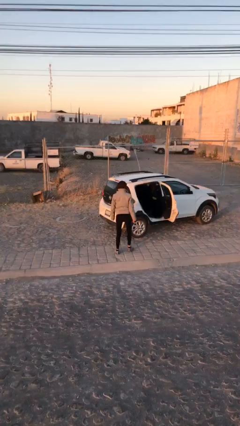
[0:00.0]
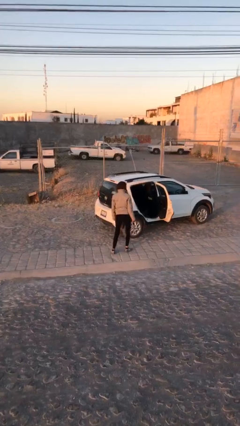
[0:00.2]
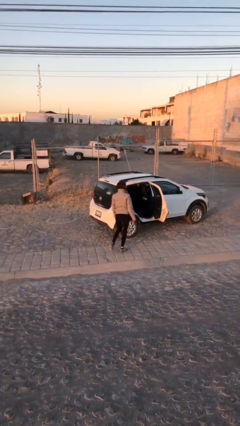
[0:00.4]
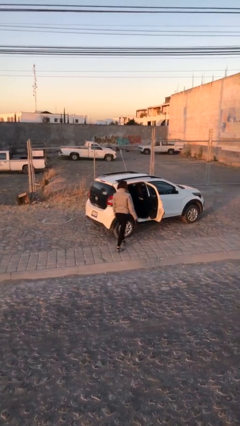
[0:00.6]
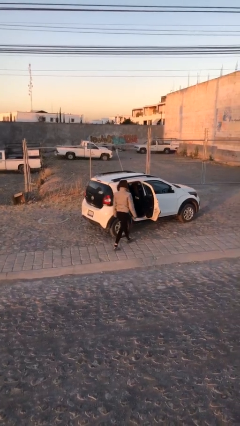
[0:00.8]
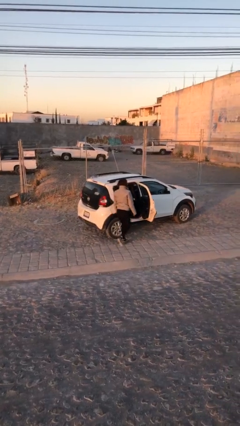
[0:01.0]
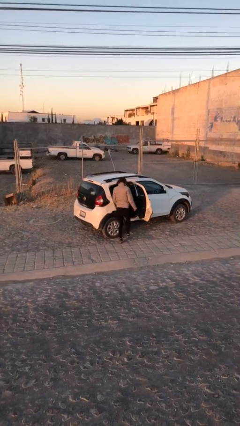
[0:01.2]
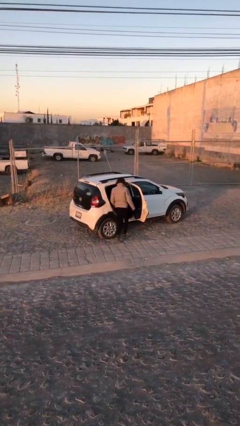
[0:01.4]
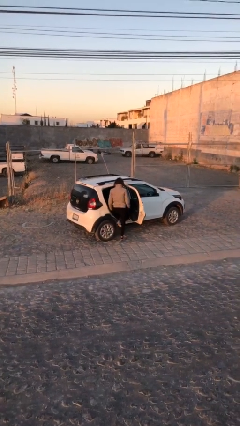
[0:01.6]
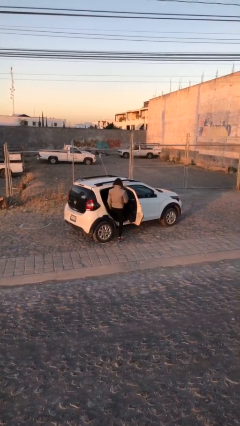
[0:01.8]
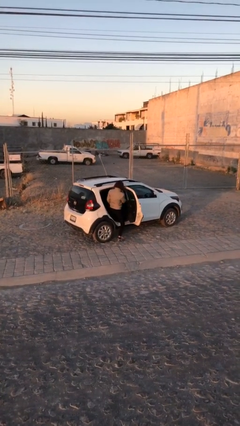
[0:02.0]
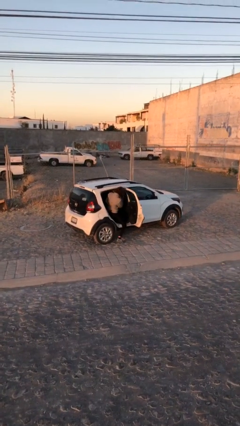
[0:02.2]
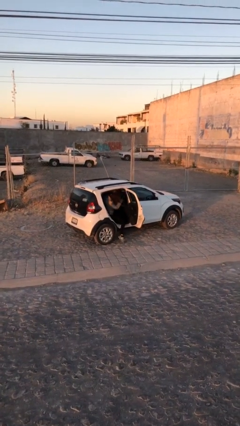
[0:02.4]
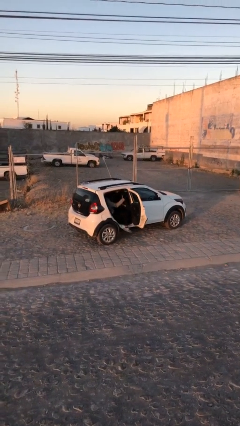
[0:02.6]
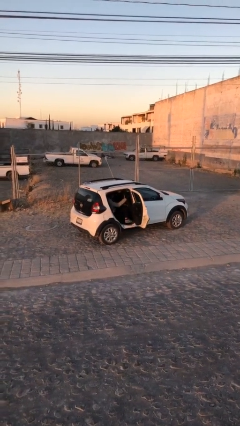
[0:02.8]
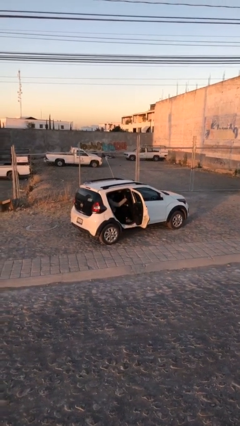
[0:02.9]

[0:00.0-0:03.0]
person enters car

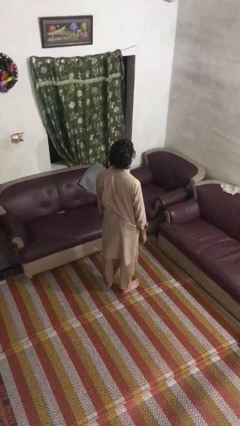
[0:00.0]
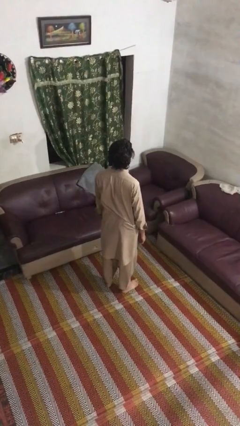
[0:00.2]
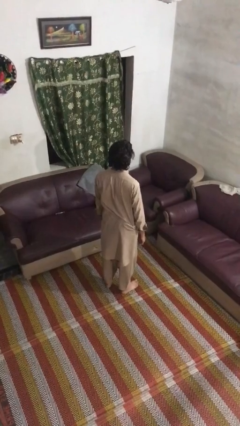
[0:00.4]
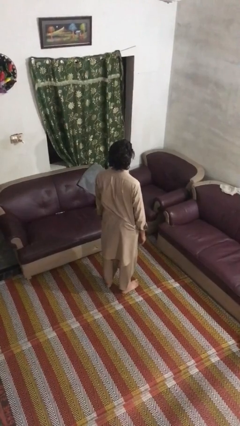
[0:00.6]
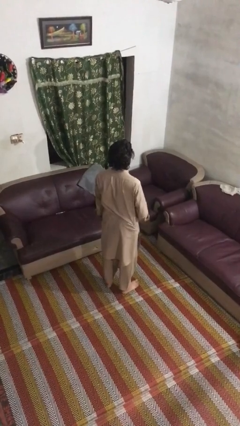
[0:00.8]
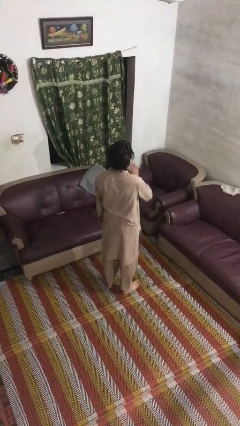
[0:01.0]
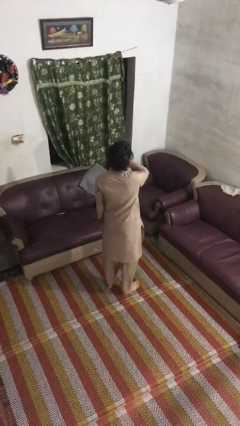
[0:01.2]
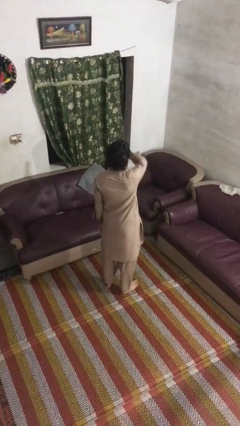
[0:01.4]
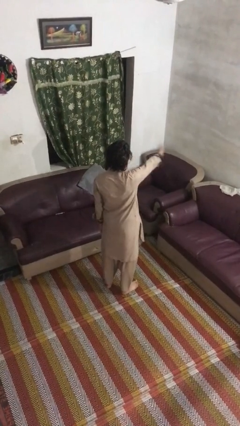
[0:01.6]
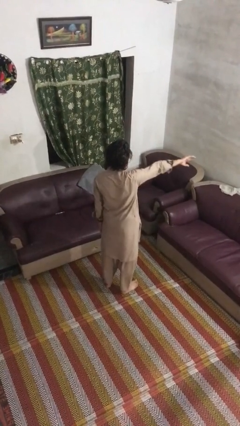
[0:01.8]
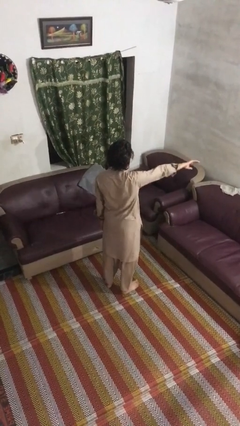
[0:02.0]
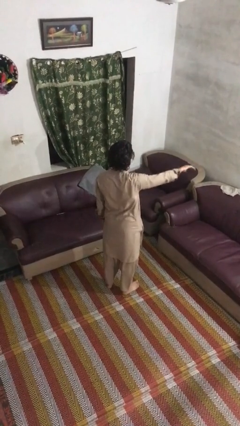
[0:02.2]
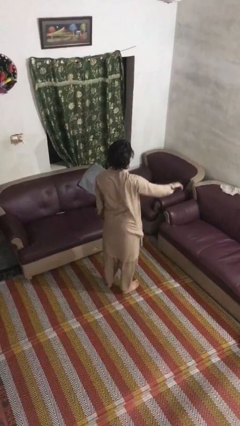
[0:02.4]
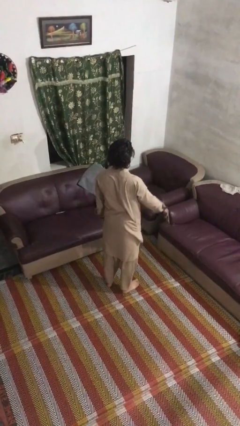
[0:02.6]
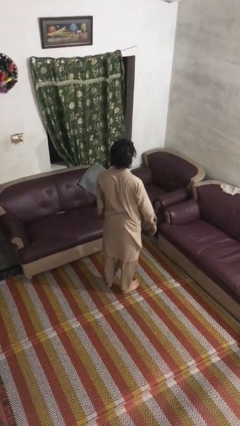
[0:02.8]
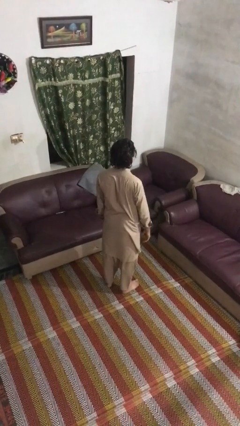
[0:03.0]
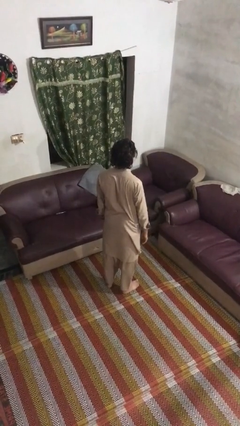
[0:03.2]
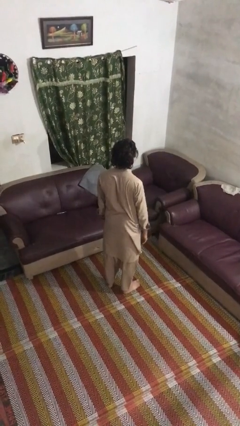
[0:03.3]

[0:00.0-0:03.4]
person gestures swipe right

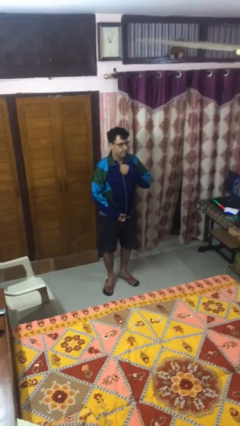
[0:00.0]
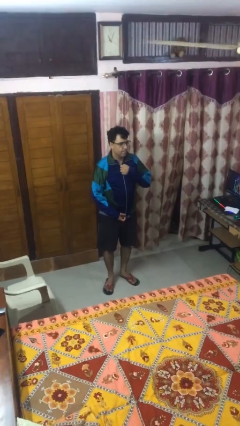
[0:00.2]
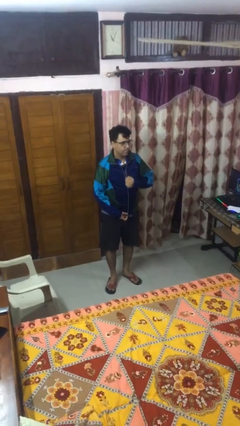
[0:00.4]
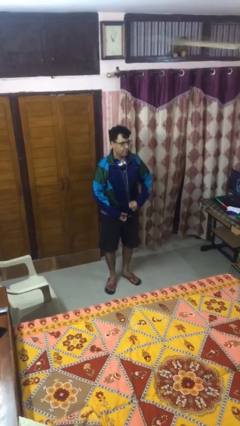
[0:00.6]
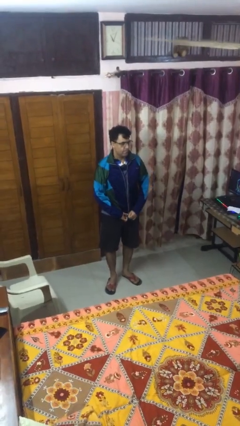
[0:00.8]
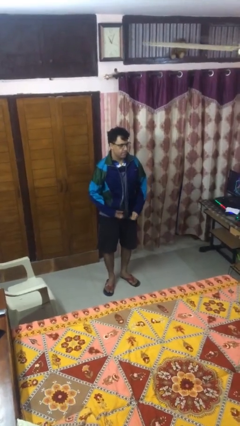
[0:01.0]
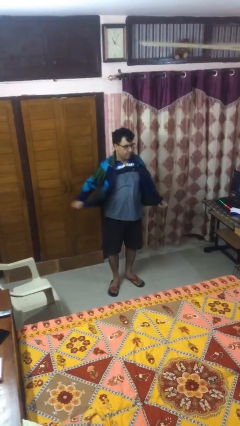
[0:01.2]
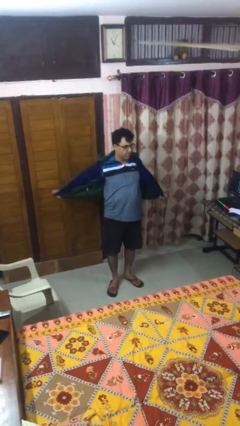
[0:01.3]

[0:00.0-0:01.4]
person unzips jacket

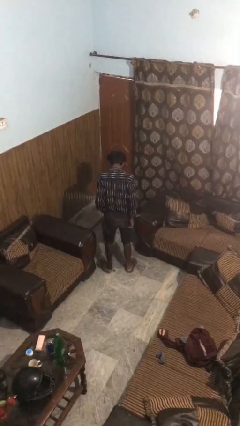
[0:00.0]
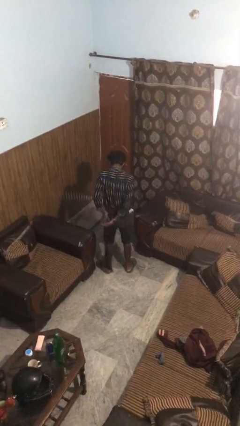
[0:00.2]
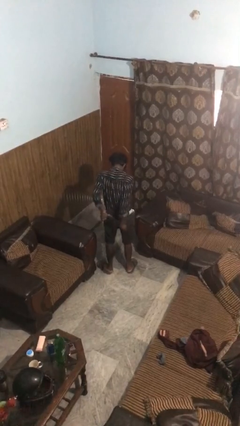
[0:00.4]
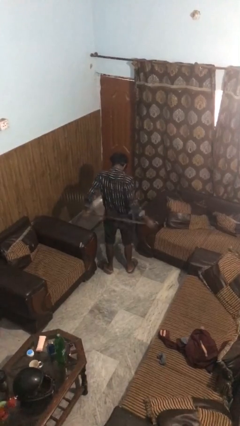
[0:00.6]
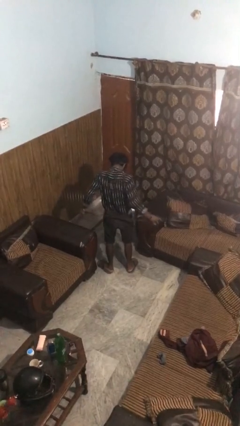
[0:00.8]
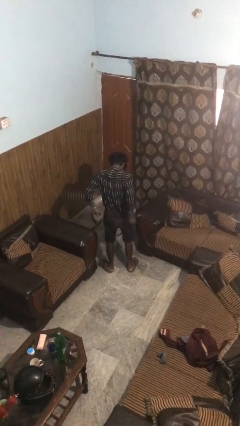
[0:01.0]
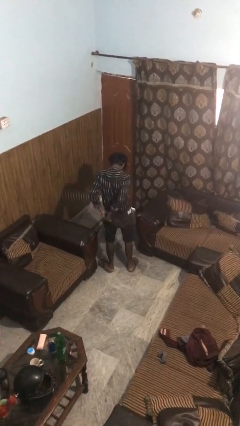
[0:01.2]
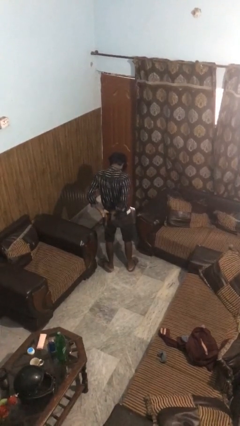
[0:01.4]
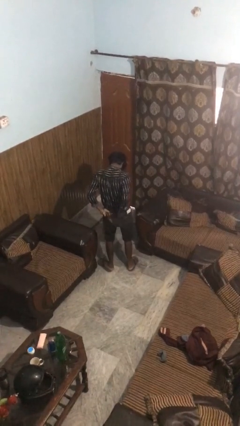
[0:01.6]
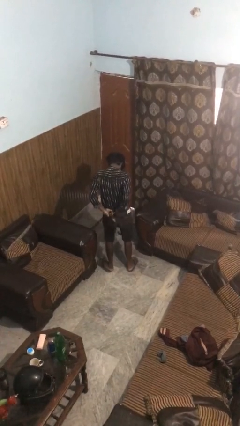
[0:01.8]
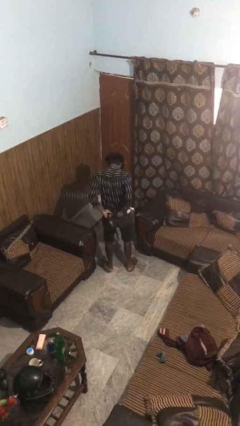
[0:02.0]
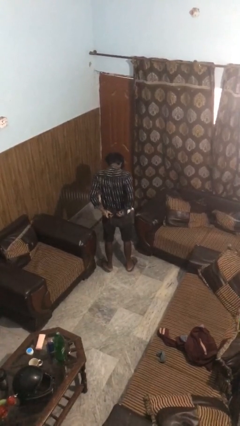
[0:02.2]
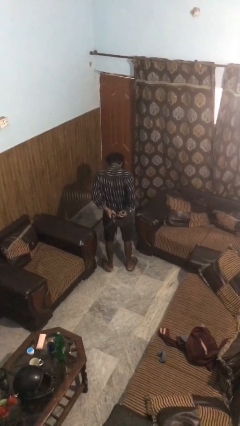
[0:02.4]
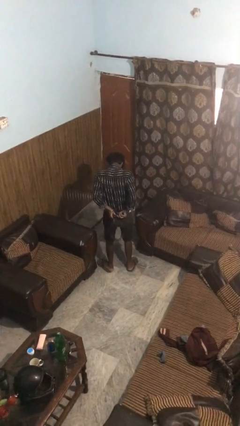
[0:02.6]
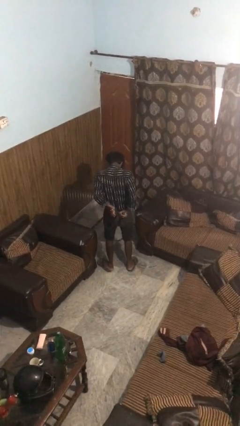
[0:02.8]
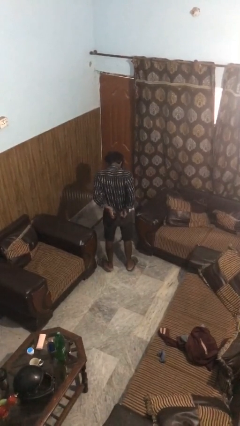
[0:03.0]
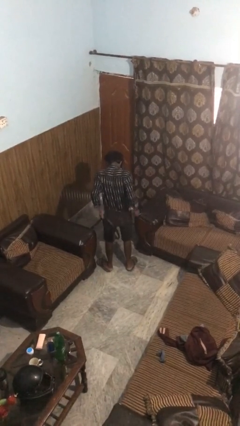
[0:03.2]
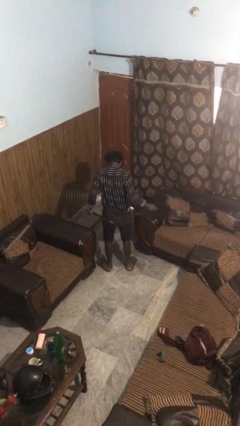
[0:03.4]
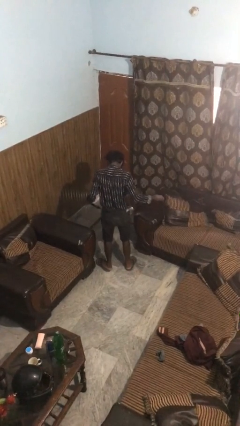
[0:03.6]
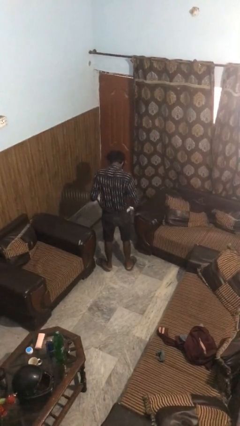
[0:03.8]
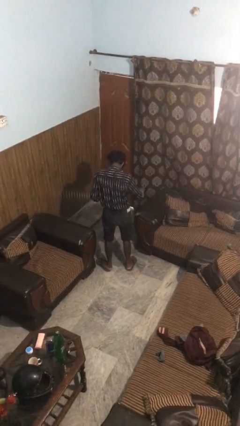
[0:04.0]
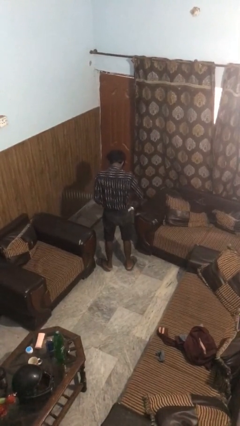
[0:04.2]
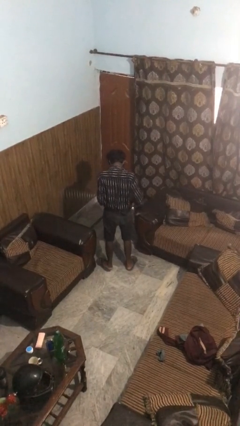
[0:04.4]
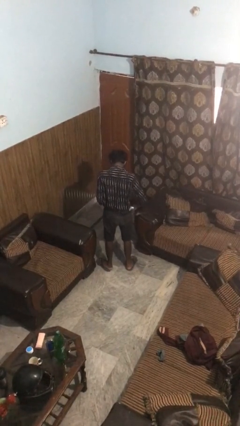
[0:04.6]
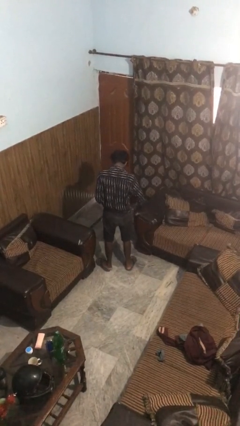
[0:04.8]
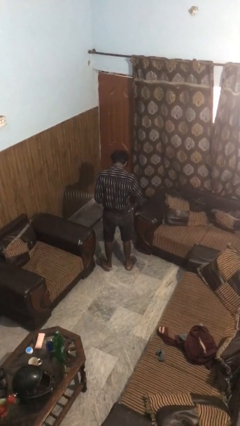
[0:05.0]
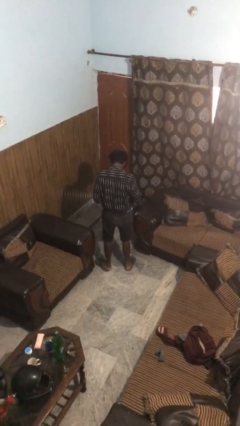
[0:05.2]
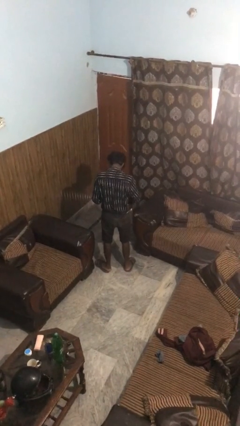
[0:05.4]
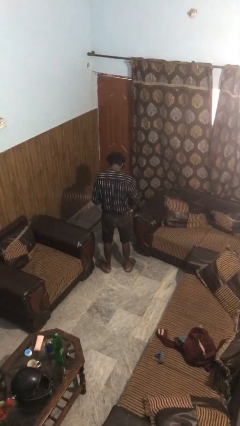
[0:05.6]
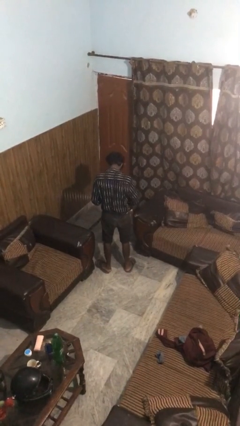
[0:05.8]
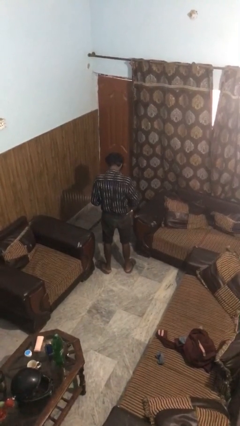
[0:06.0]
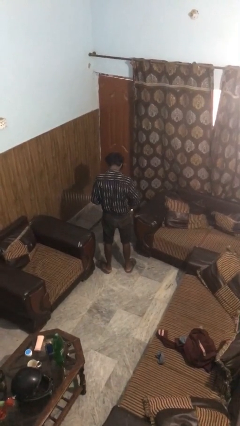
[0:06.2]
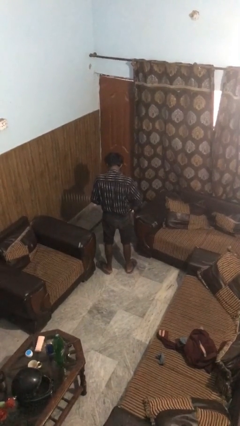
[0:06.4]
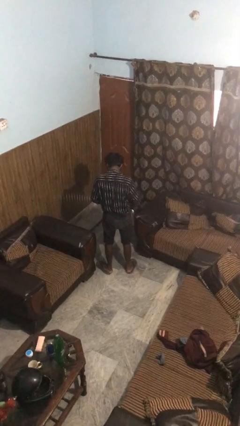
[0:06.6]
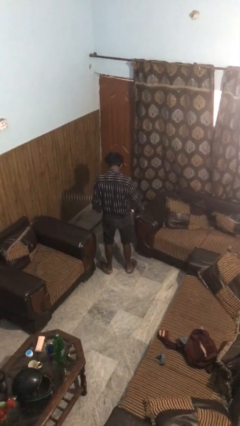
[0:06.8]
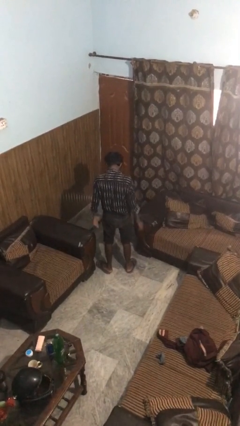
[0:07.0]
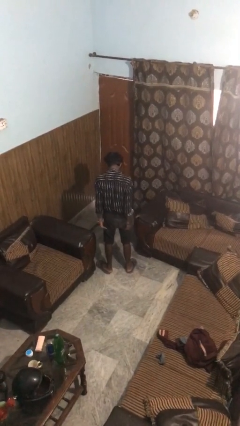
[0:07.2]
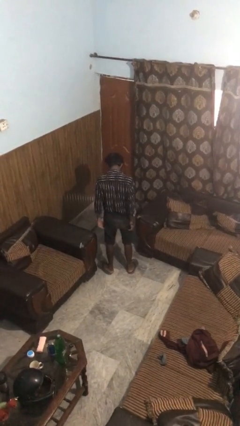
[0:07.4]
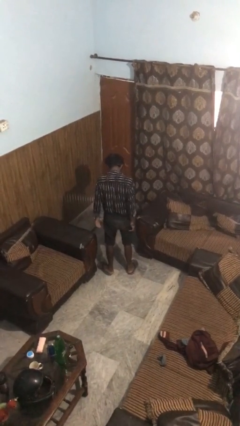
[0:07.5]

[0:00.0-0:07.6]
person puts on belt

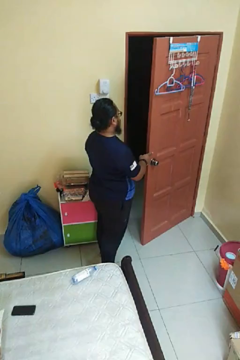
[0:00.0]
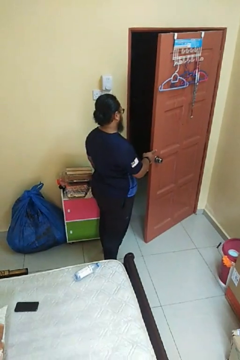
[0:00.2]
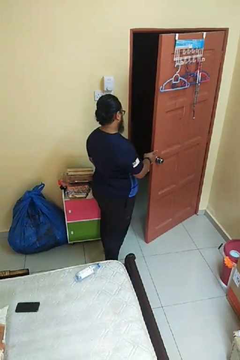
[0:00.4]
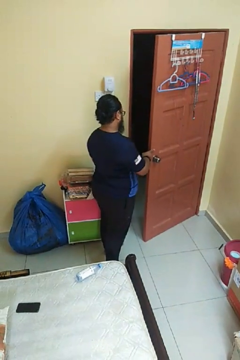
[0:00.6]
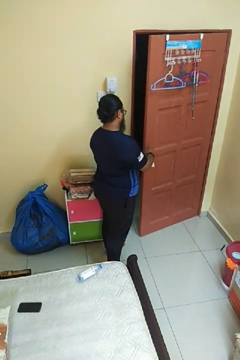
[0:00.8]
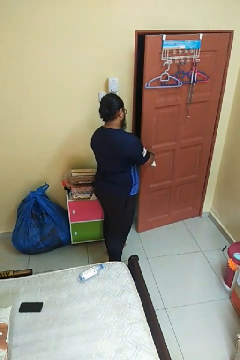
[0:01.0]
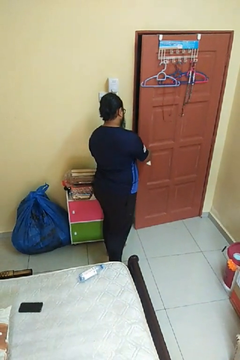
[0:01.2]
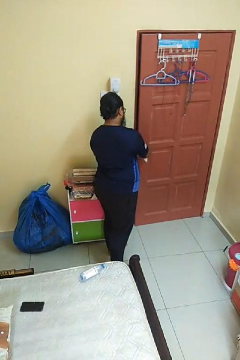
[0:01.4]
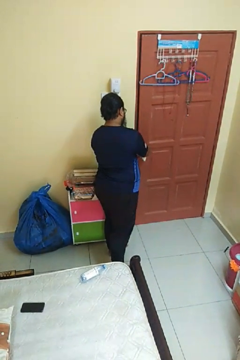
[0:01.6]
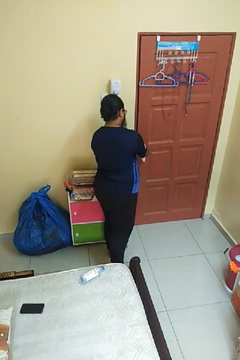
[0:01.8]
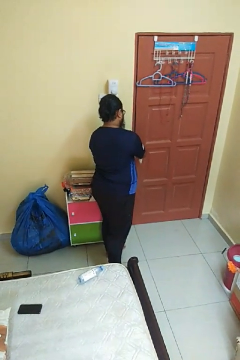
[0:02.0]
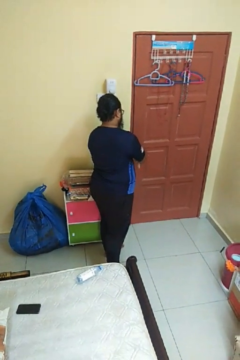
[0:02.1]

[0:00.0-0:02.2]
person closes facility door

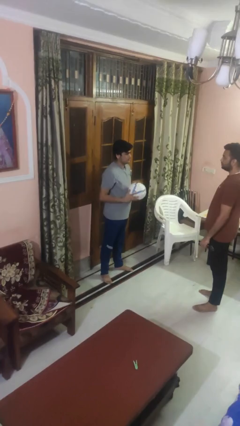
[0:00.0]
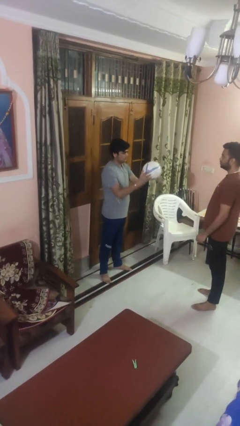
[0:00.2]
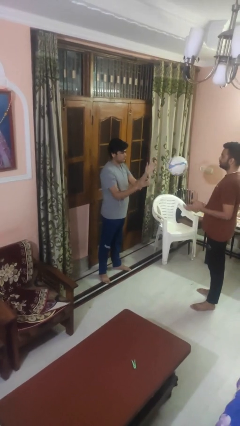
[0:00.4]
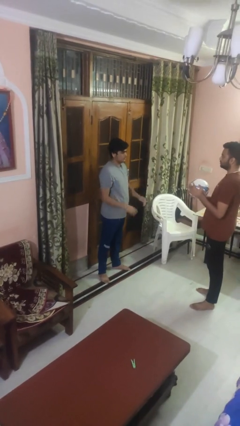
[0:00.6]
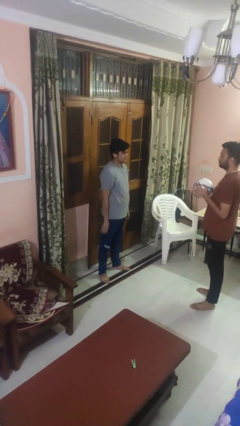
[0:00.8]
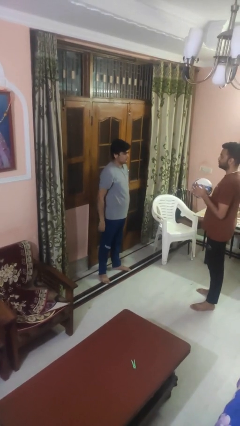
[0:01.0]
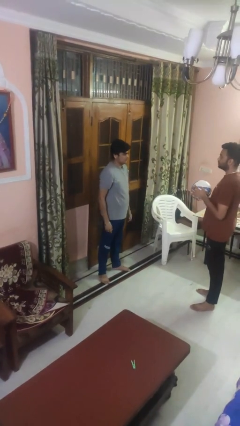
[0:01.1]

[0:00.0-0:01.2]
person throws object to person
